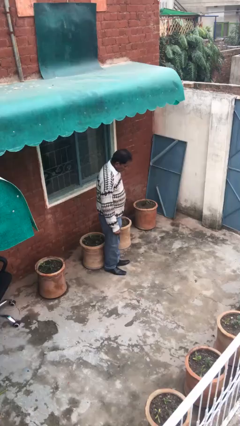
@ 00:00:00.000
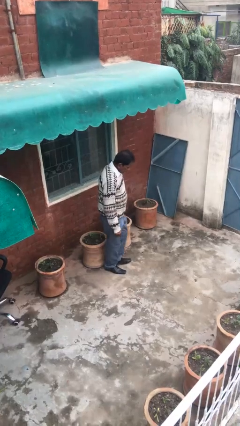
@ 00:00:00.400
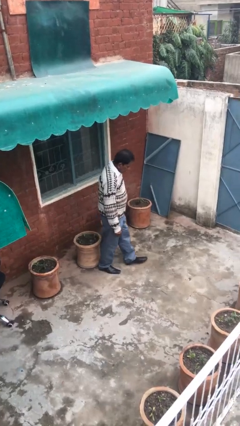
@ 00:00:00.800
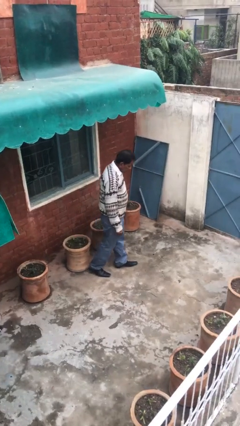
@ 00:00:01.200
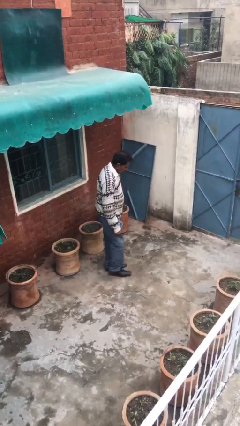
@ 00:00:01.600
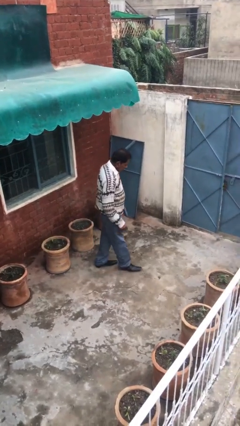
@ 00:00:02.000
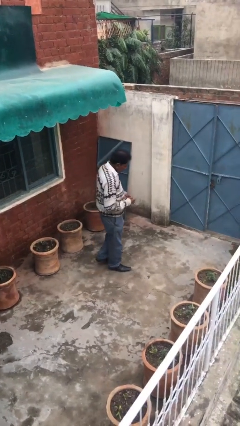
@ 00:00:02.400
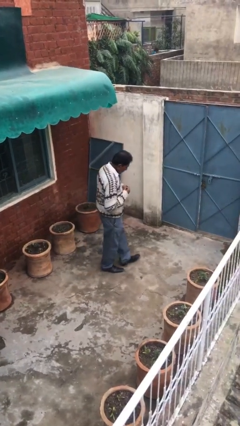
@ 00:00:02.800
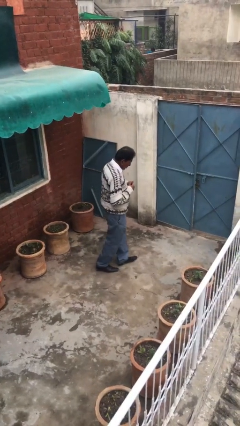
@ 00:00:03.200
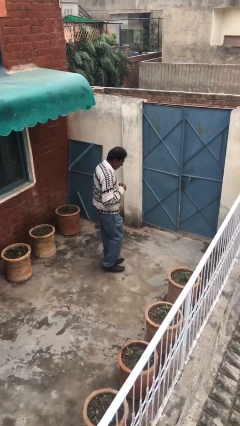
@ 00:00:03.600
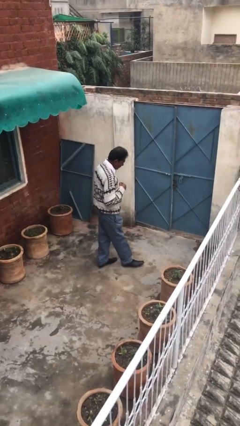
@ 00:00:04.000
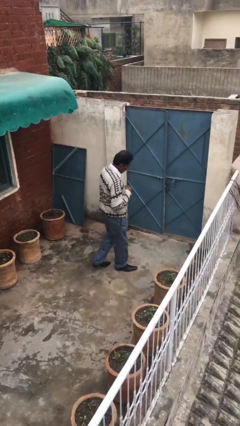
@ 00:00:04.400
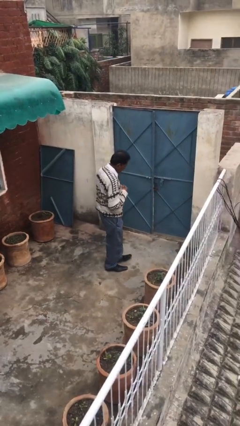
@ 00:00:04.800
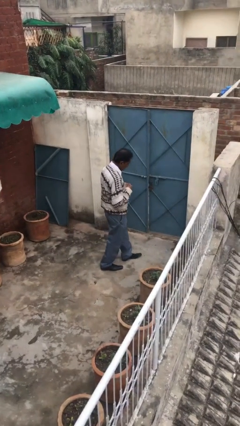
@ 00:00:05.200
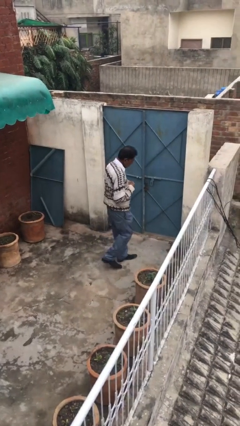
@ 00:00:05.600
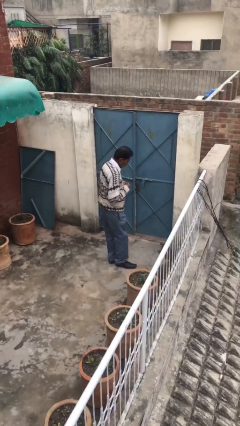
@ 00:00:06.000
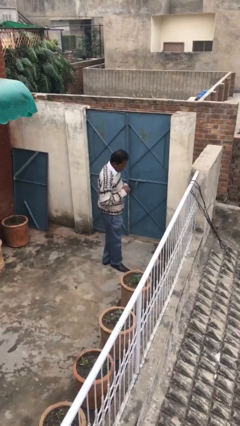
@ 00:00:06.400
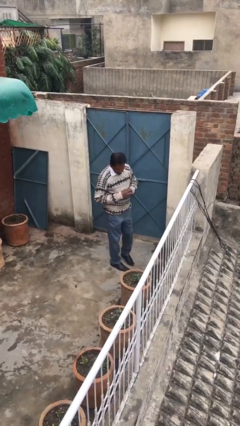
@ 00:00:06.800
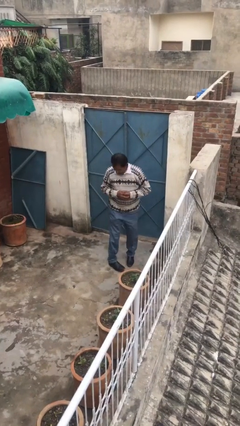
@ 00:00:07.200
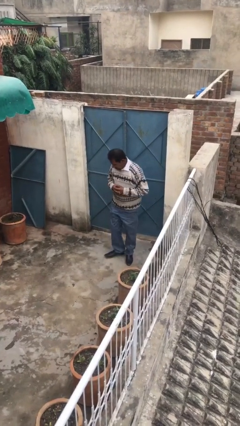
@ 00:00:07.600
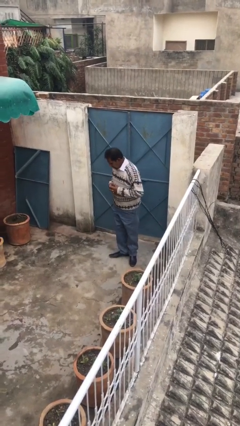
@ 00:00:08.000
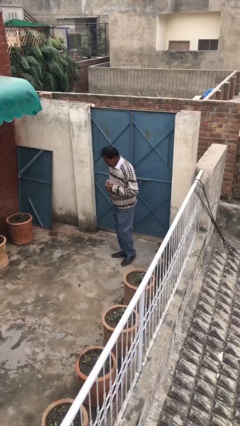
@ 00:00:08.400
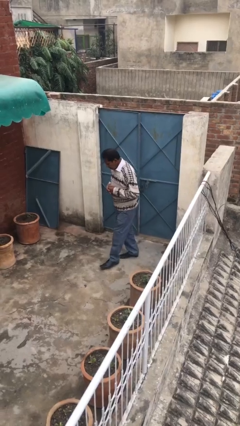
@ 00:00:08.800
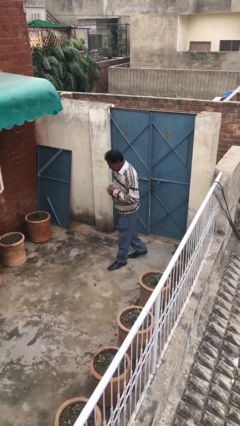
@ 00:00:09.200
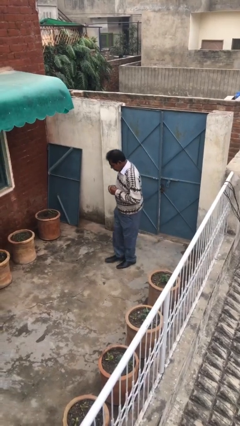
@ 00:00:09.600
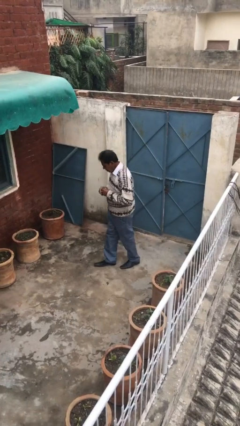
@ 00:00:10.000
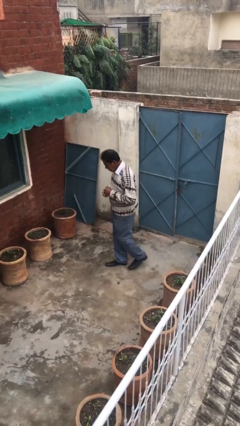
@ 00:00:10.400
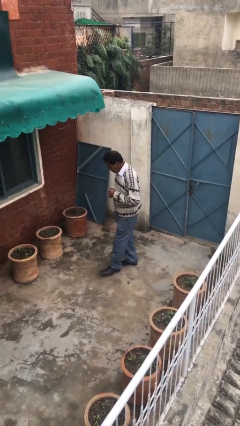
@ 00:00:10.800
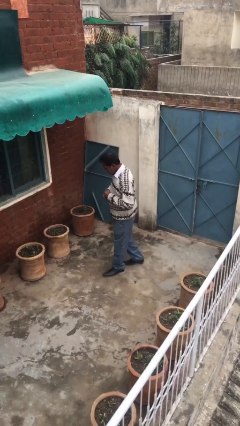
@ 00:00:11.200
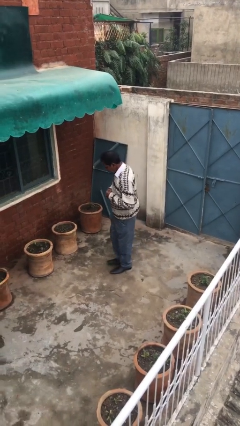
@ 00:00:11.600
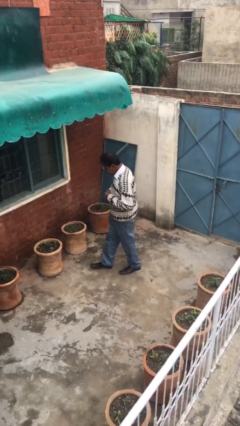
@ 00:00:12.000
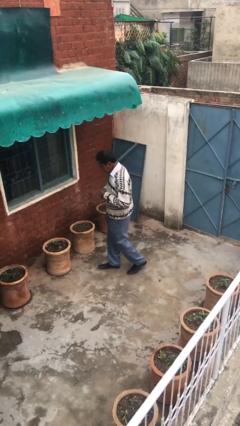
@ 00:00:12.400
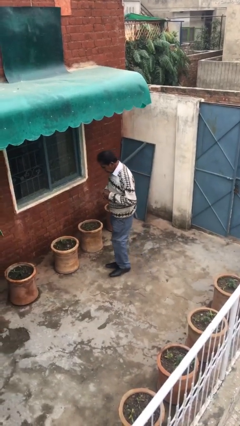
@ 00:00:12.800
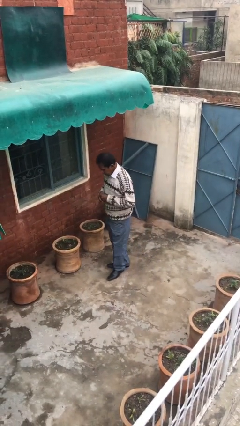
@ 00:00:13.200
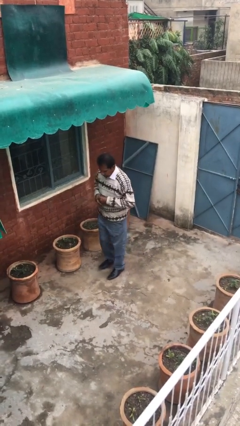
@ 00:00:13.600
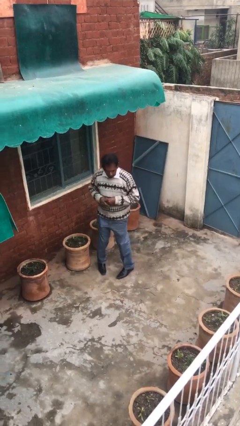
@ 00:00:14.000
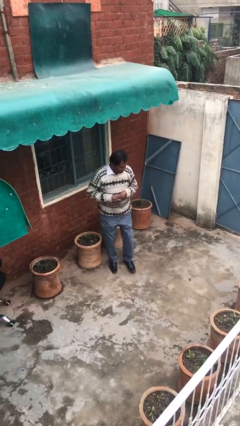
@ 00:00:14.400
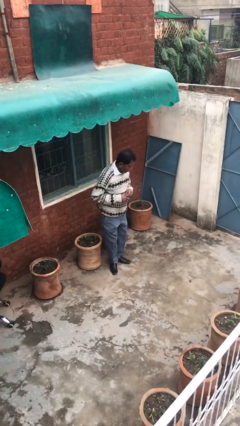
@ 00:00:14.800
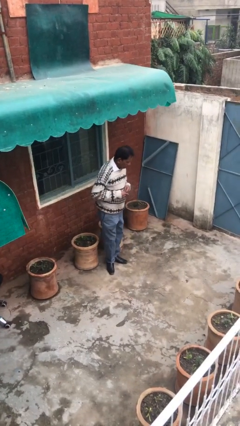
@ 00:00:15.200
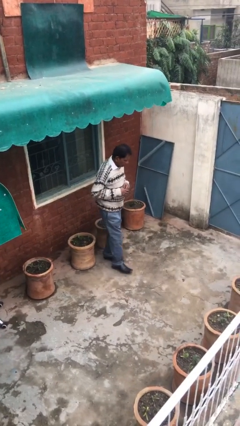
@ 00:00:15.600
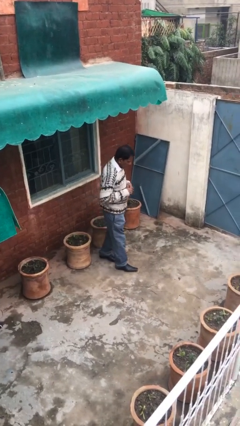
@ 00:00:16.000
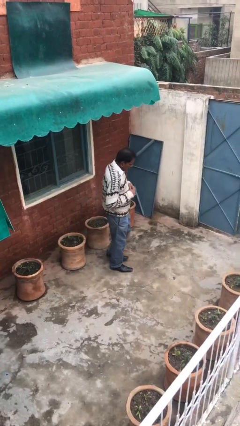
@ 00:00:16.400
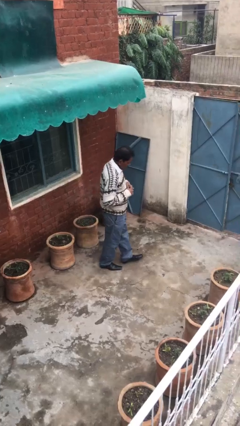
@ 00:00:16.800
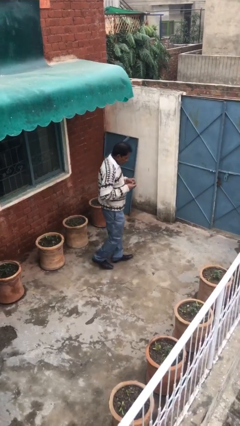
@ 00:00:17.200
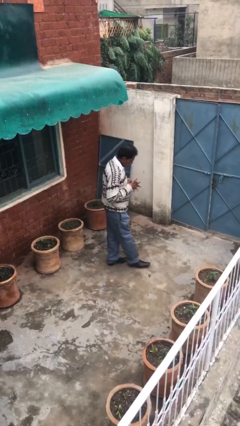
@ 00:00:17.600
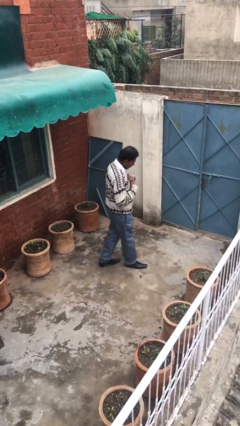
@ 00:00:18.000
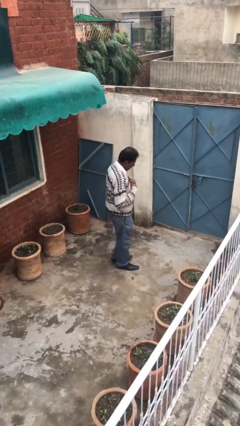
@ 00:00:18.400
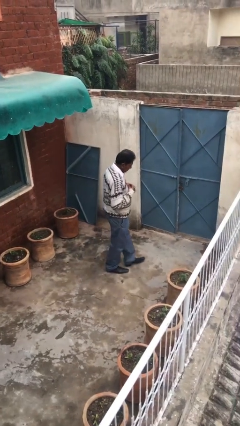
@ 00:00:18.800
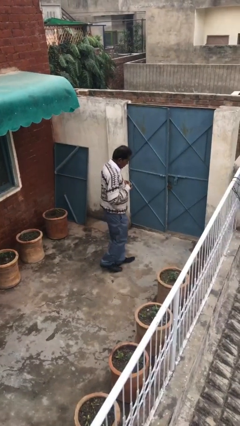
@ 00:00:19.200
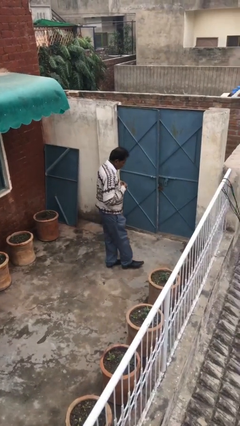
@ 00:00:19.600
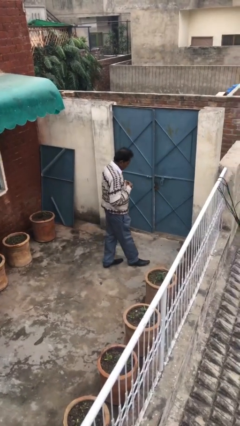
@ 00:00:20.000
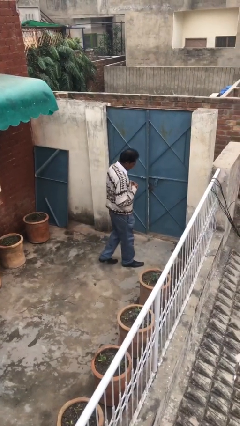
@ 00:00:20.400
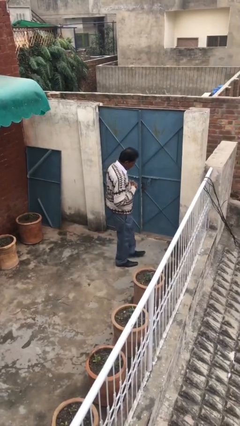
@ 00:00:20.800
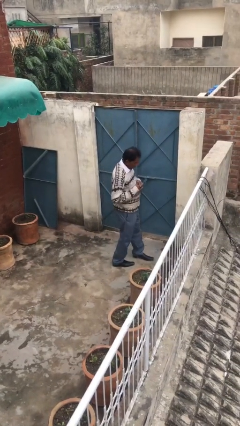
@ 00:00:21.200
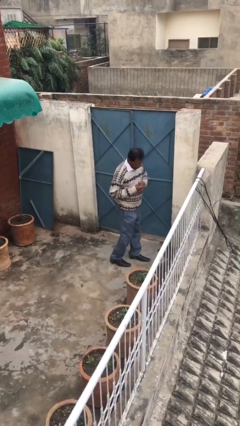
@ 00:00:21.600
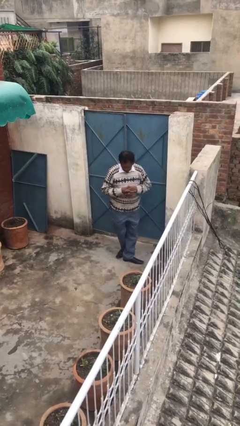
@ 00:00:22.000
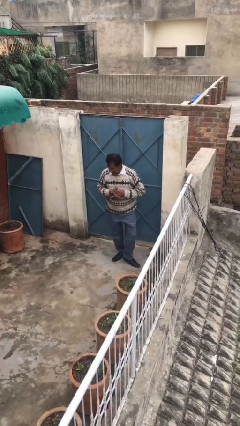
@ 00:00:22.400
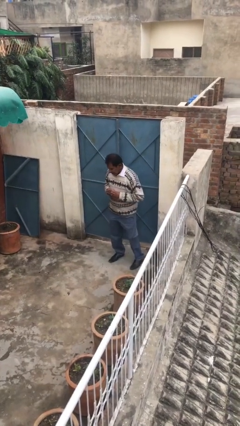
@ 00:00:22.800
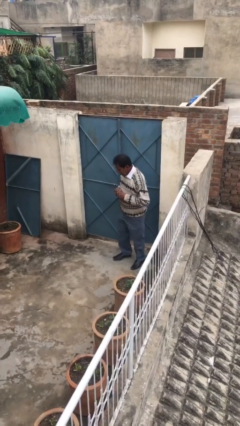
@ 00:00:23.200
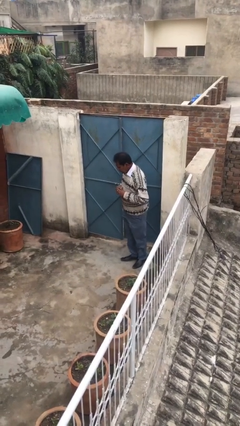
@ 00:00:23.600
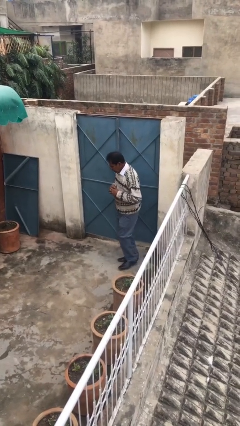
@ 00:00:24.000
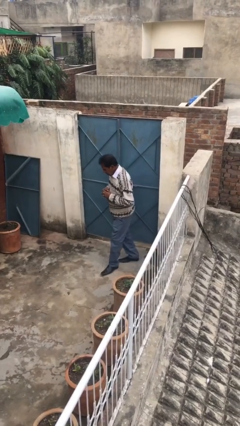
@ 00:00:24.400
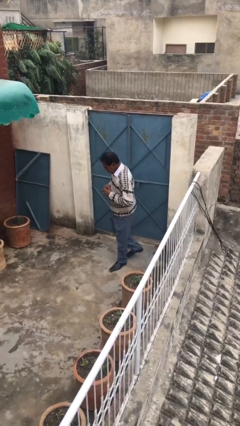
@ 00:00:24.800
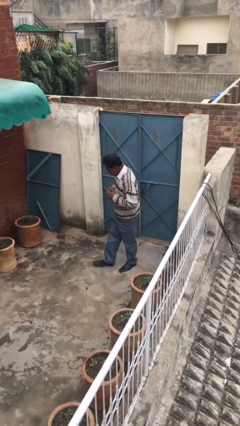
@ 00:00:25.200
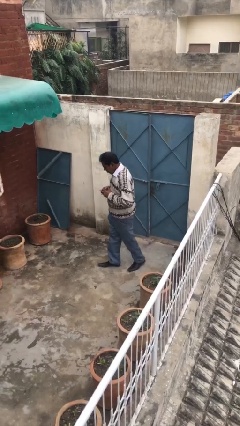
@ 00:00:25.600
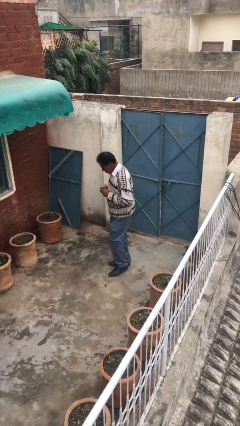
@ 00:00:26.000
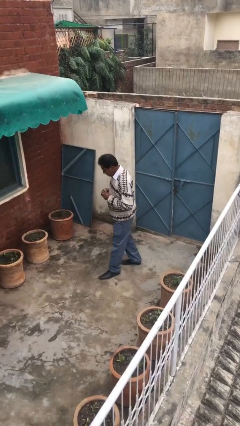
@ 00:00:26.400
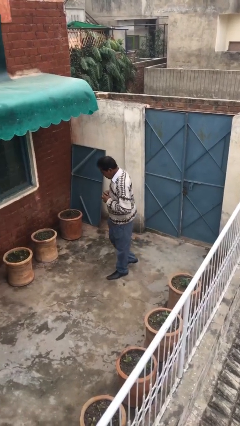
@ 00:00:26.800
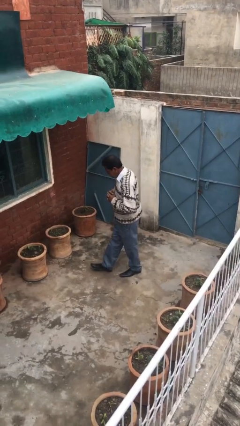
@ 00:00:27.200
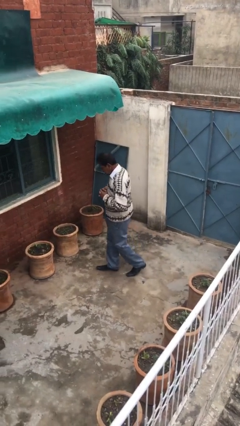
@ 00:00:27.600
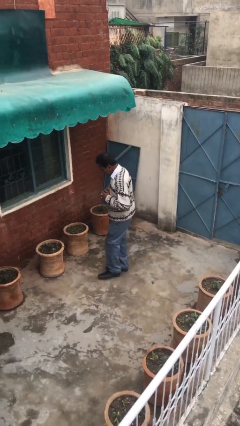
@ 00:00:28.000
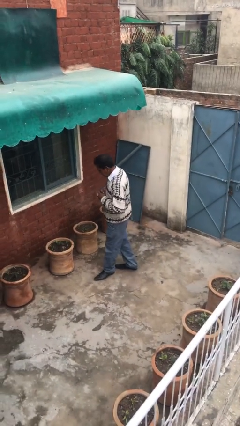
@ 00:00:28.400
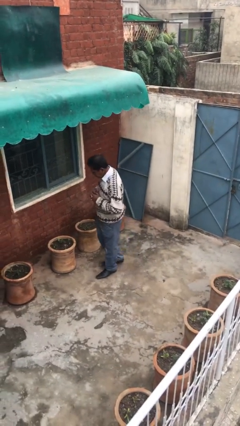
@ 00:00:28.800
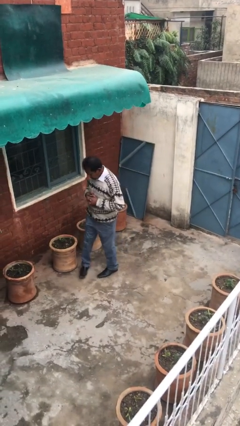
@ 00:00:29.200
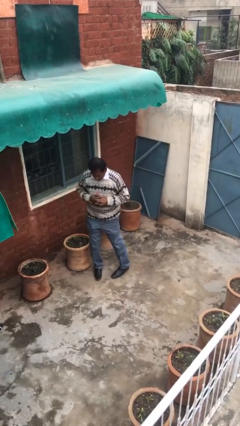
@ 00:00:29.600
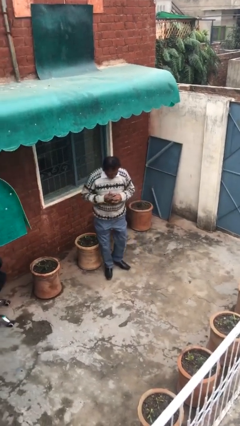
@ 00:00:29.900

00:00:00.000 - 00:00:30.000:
person walks

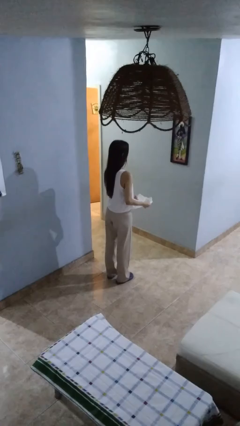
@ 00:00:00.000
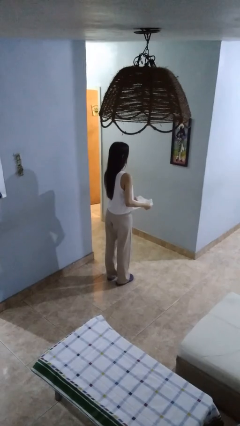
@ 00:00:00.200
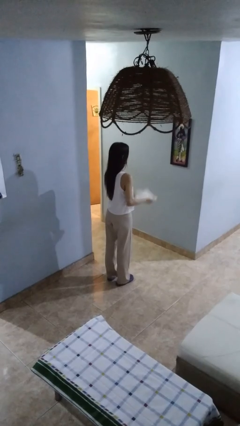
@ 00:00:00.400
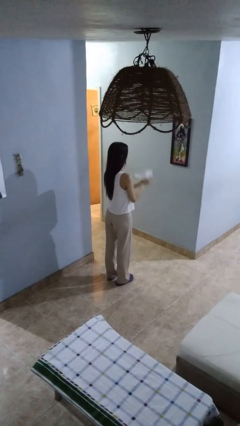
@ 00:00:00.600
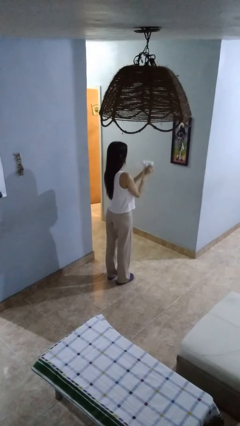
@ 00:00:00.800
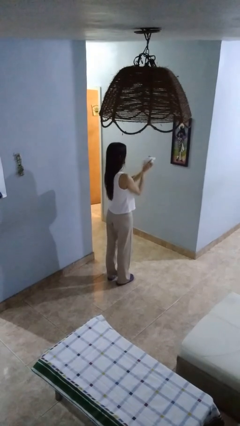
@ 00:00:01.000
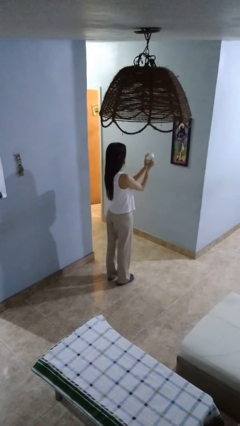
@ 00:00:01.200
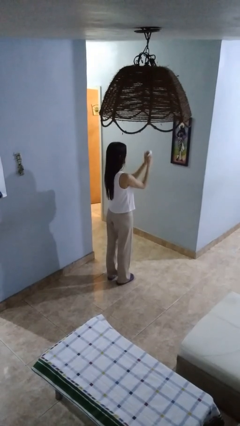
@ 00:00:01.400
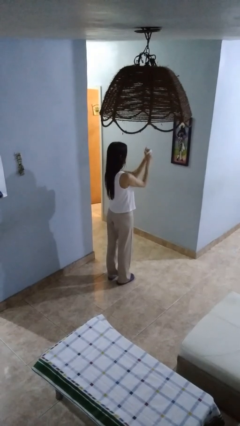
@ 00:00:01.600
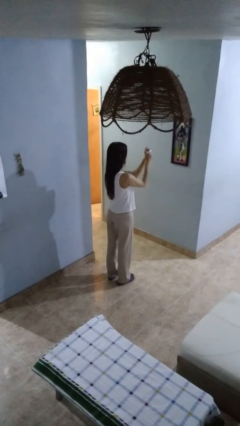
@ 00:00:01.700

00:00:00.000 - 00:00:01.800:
person crumples paper

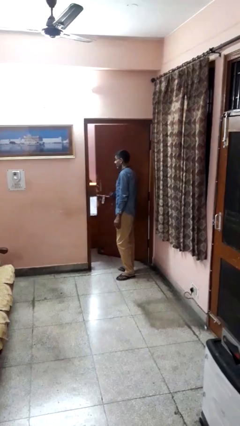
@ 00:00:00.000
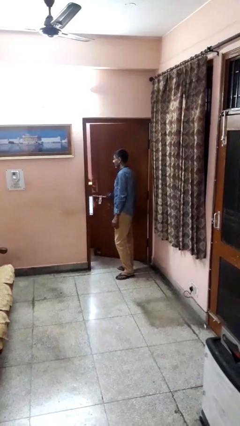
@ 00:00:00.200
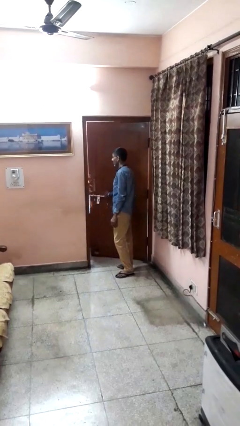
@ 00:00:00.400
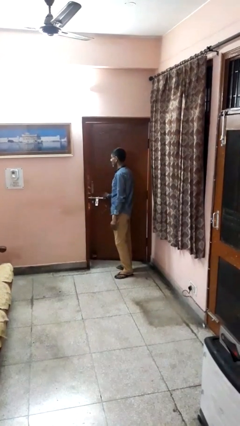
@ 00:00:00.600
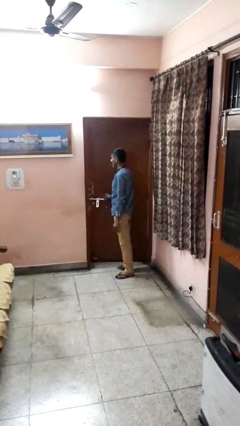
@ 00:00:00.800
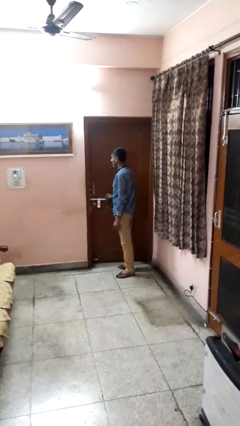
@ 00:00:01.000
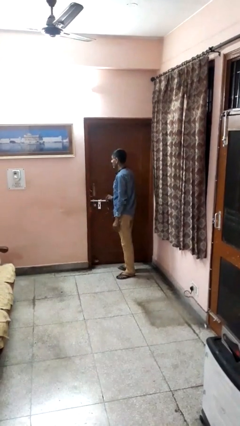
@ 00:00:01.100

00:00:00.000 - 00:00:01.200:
person closes facility door
